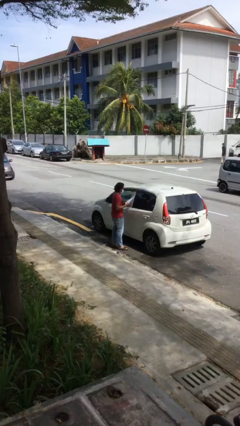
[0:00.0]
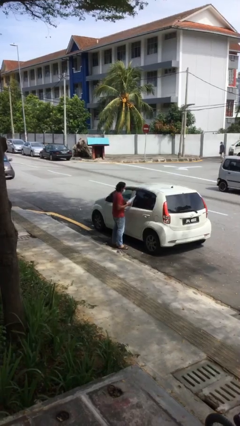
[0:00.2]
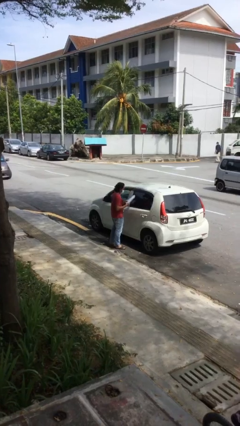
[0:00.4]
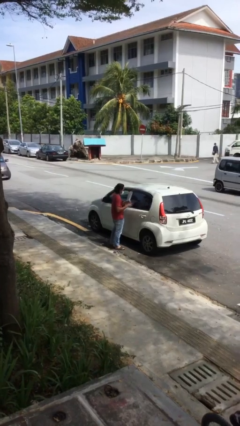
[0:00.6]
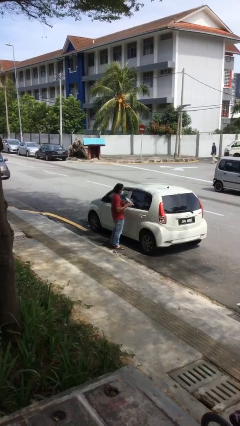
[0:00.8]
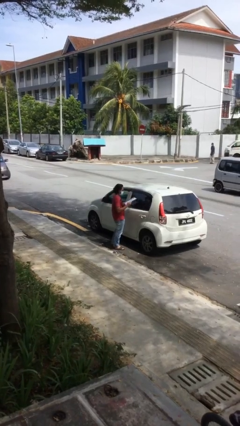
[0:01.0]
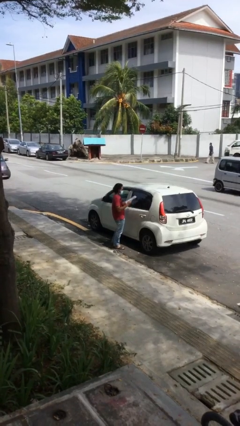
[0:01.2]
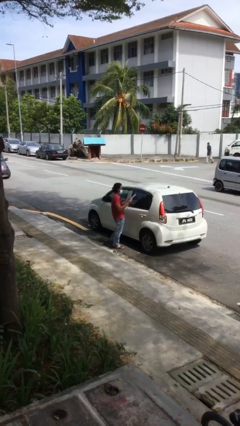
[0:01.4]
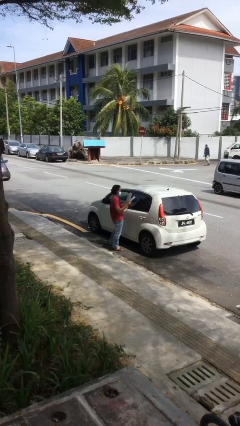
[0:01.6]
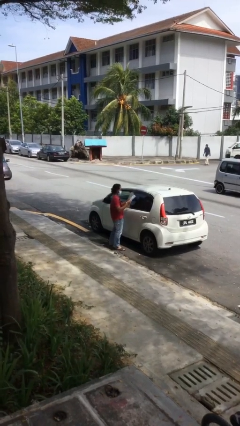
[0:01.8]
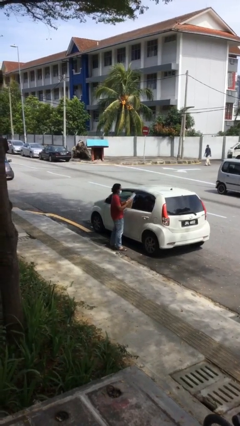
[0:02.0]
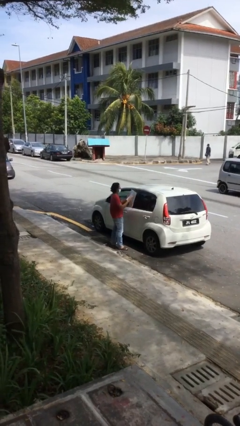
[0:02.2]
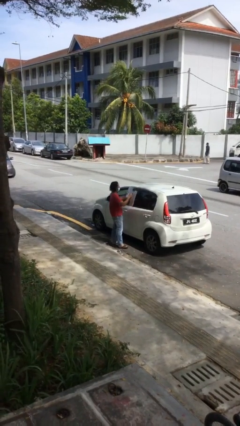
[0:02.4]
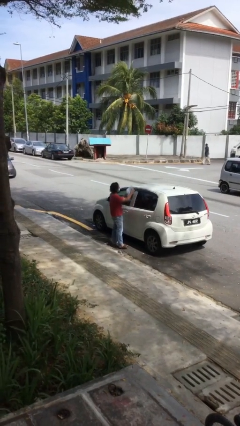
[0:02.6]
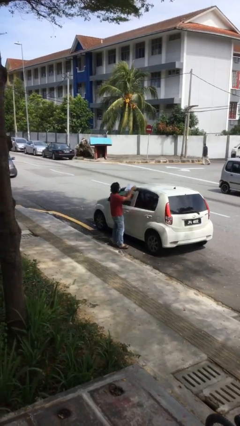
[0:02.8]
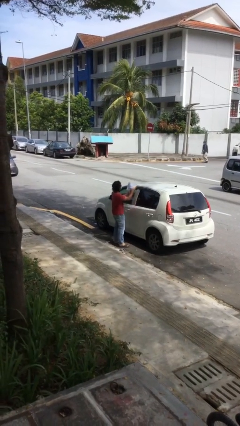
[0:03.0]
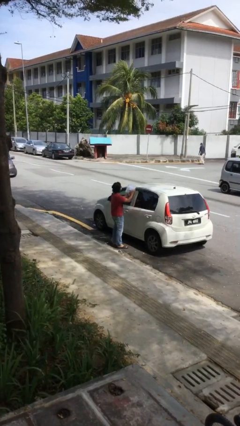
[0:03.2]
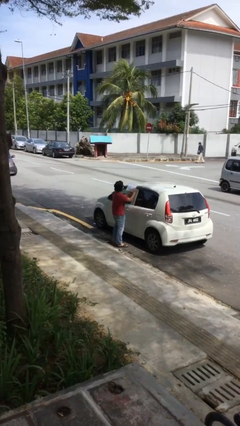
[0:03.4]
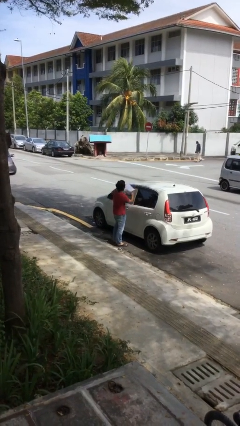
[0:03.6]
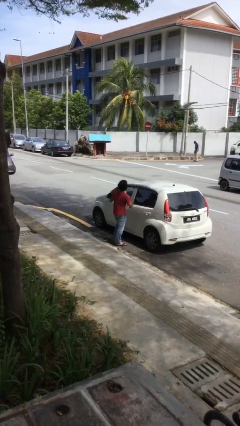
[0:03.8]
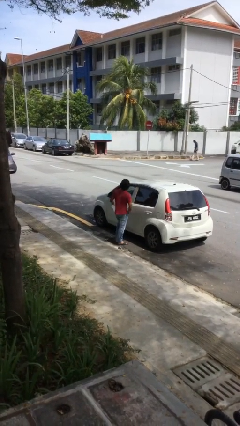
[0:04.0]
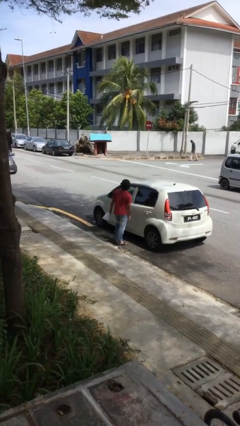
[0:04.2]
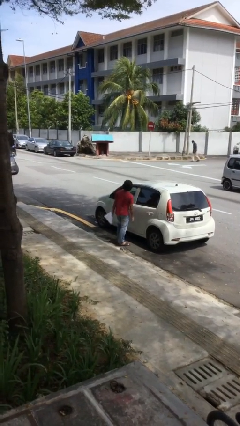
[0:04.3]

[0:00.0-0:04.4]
person reads document

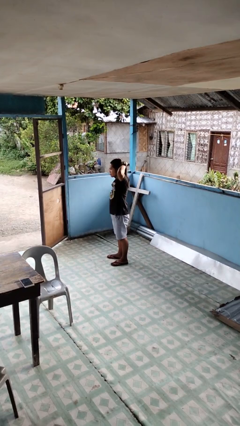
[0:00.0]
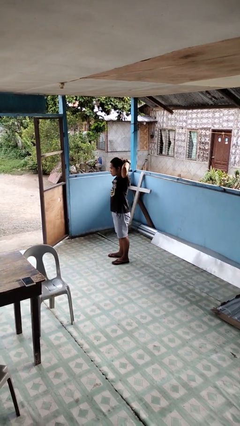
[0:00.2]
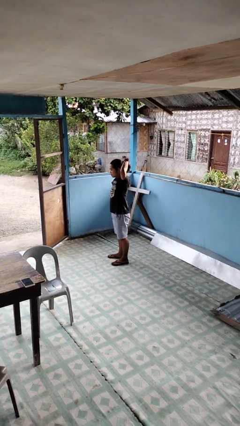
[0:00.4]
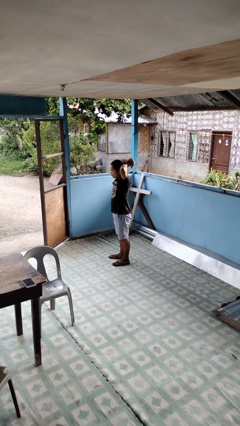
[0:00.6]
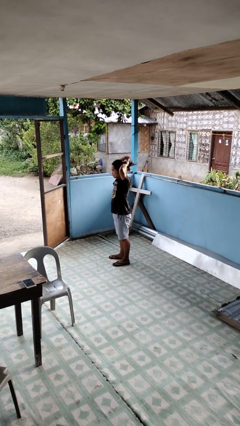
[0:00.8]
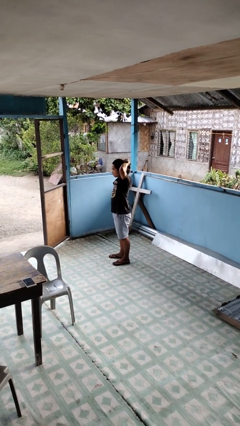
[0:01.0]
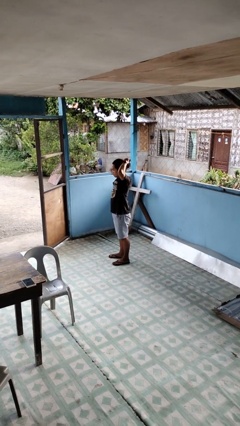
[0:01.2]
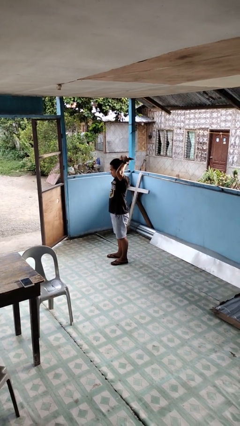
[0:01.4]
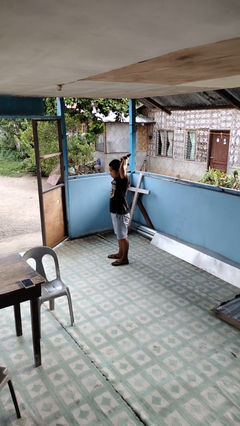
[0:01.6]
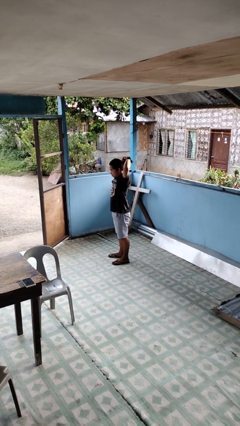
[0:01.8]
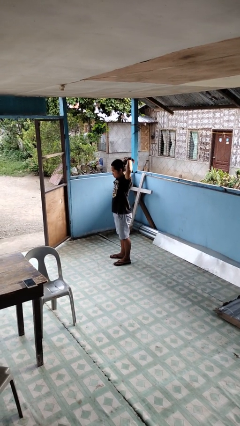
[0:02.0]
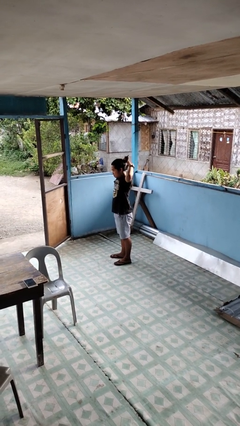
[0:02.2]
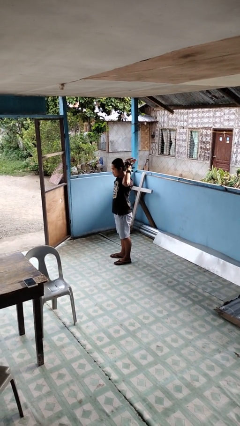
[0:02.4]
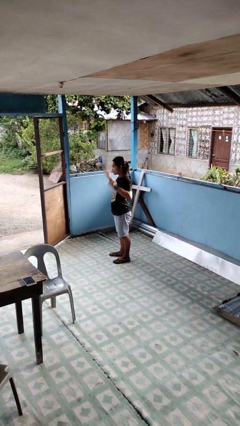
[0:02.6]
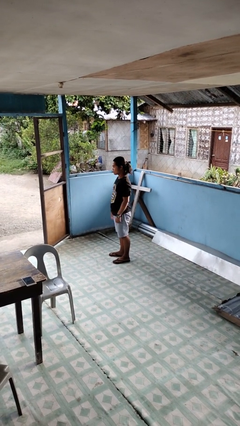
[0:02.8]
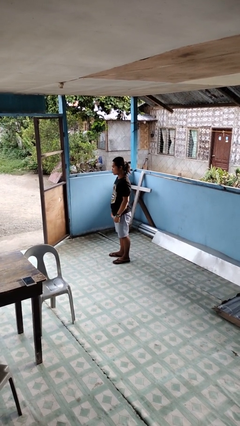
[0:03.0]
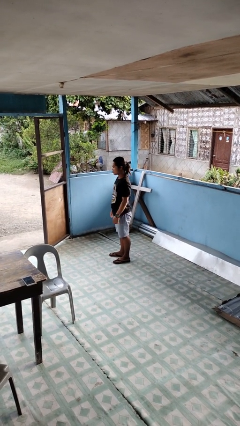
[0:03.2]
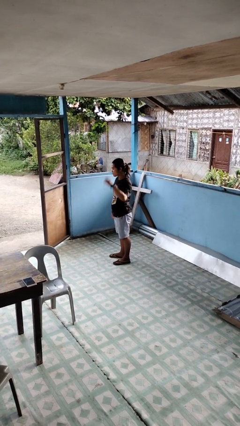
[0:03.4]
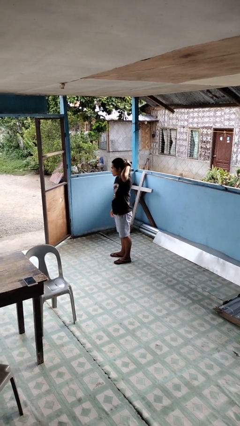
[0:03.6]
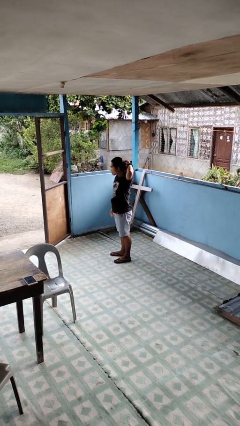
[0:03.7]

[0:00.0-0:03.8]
person puts hair in ponytail

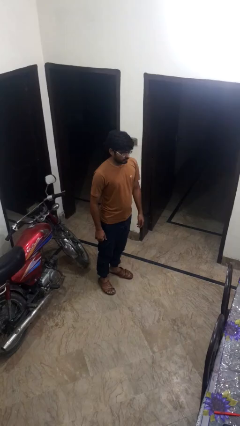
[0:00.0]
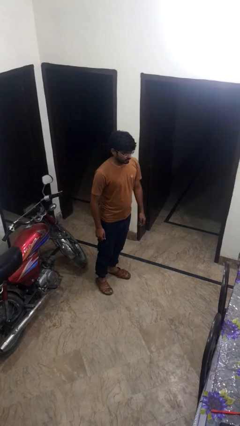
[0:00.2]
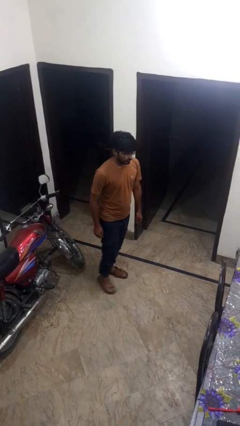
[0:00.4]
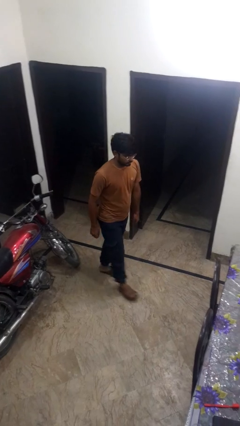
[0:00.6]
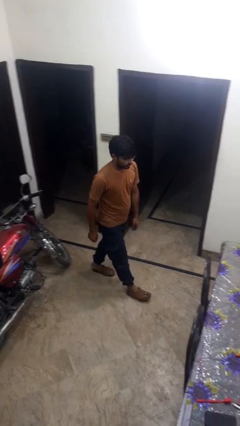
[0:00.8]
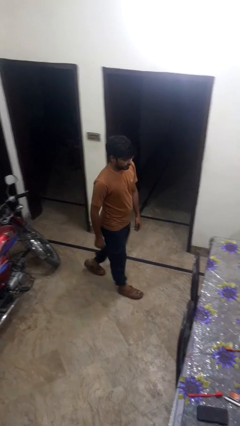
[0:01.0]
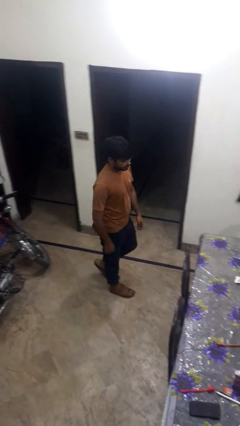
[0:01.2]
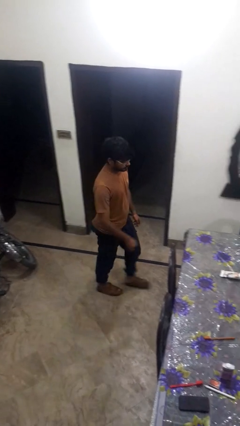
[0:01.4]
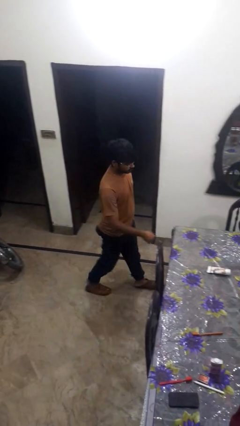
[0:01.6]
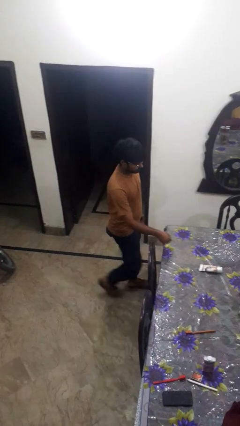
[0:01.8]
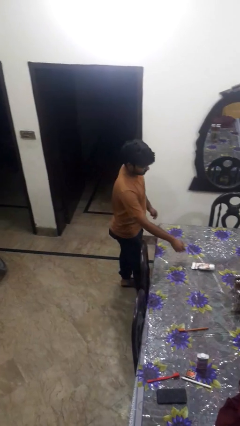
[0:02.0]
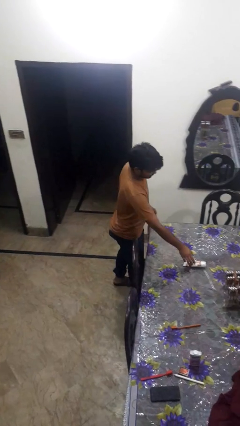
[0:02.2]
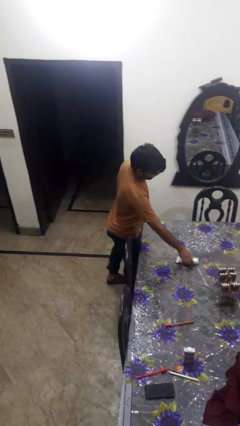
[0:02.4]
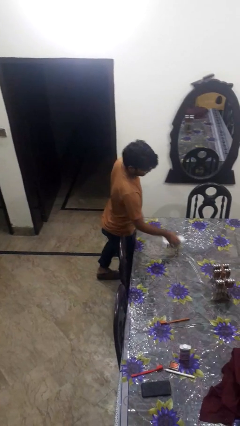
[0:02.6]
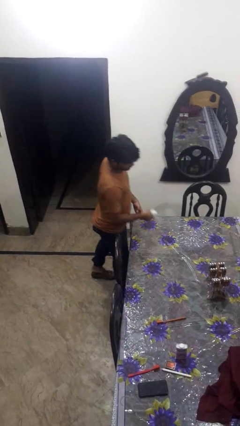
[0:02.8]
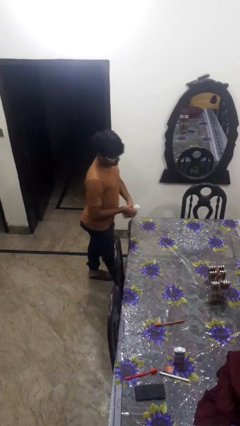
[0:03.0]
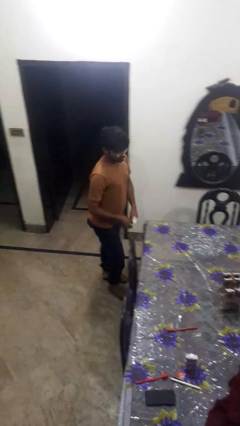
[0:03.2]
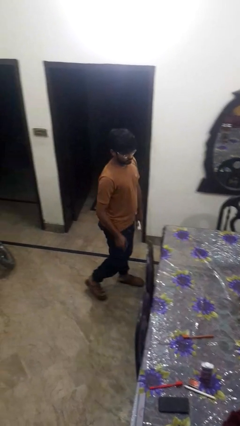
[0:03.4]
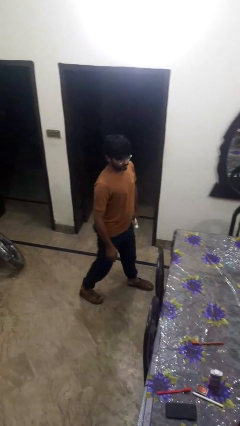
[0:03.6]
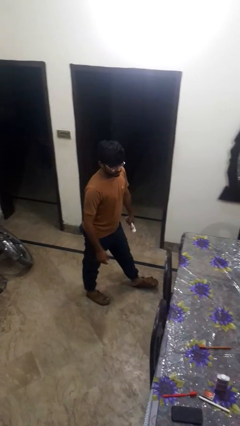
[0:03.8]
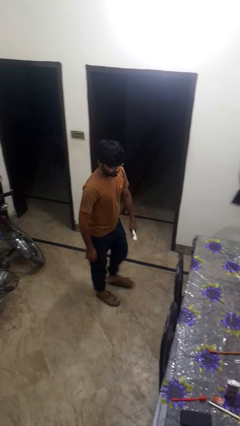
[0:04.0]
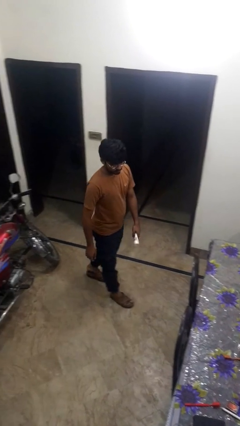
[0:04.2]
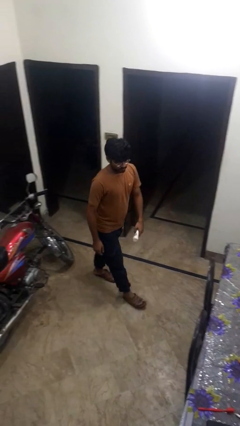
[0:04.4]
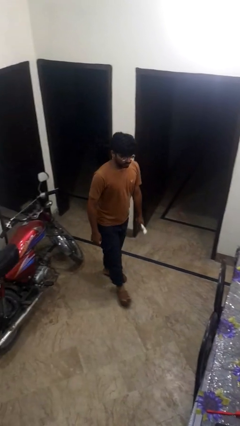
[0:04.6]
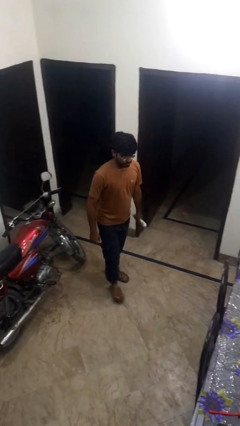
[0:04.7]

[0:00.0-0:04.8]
person picks up object from table

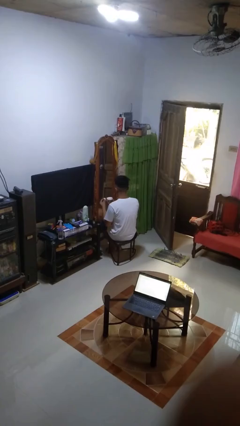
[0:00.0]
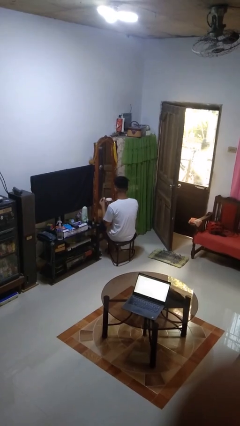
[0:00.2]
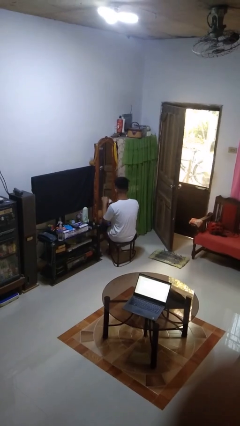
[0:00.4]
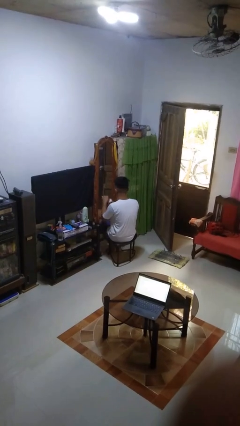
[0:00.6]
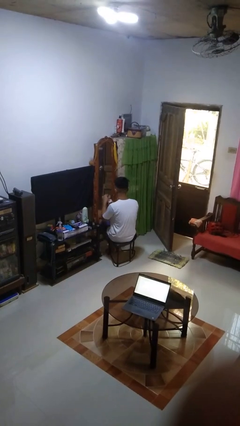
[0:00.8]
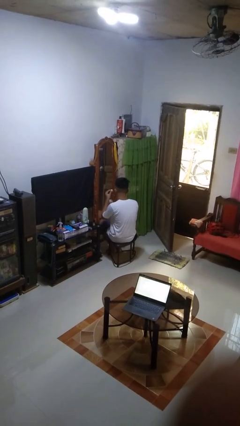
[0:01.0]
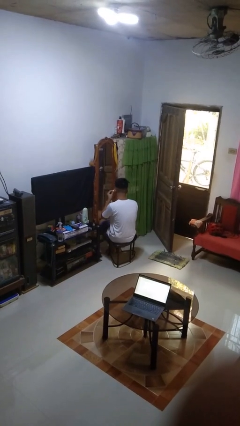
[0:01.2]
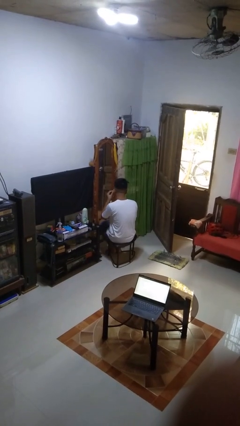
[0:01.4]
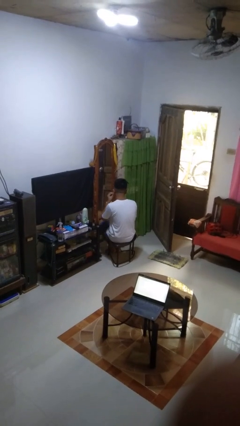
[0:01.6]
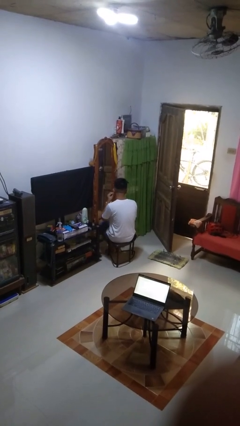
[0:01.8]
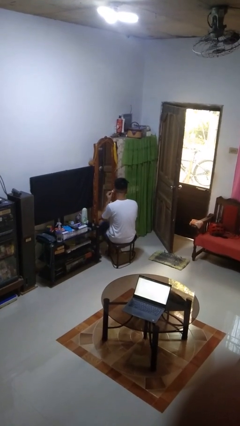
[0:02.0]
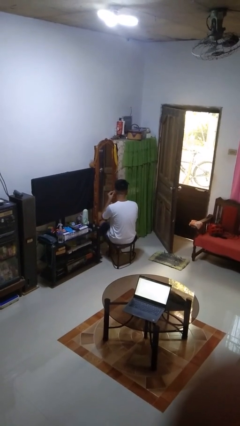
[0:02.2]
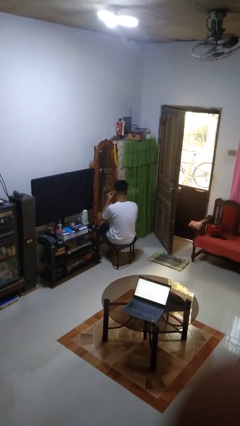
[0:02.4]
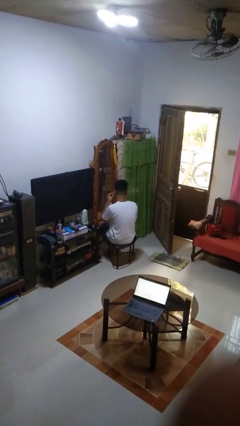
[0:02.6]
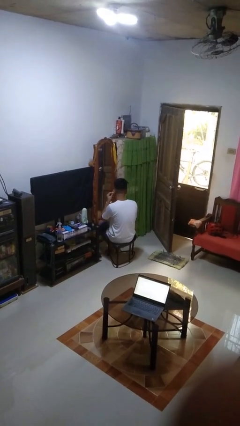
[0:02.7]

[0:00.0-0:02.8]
person applies foundation makeup

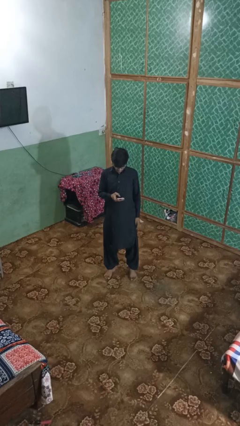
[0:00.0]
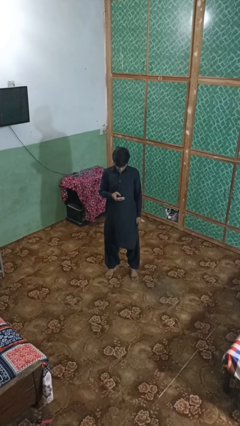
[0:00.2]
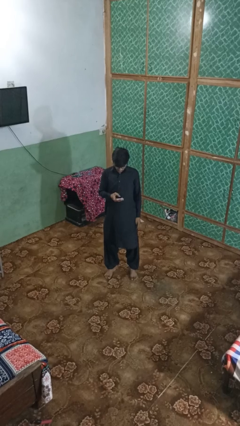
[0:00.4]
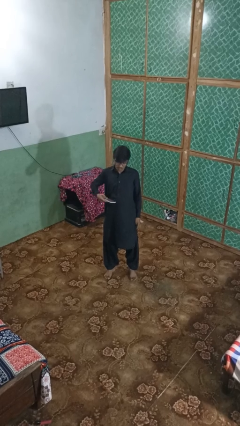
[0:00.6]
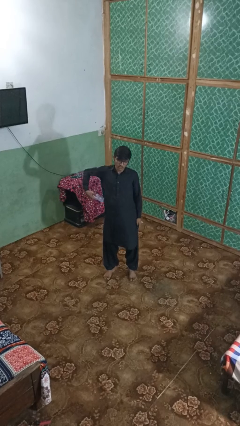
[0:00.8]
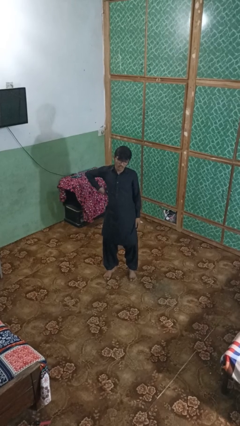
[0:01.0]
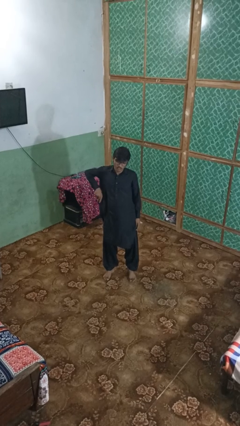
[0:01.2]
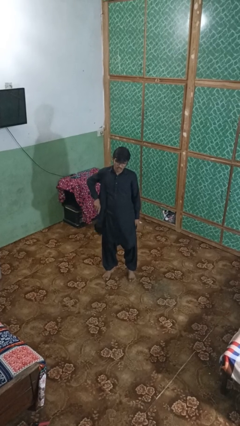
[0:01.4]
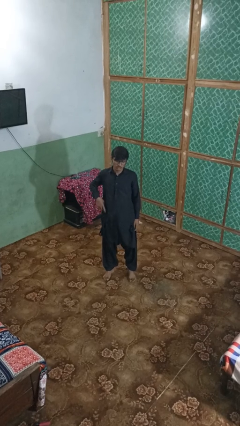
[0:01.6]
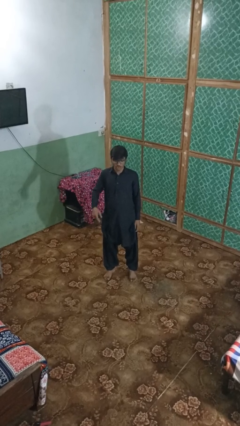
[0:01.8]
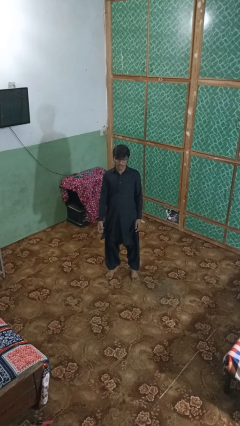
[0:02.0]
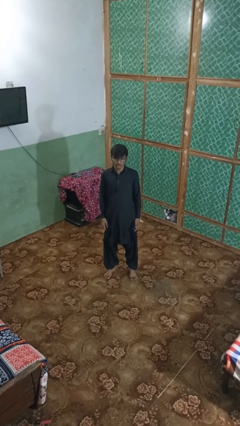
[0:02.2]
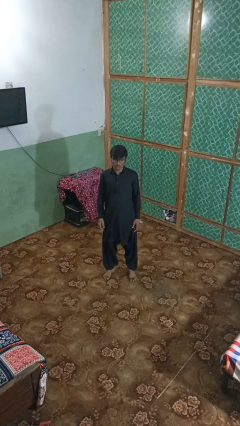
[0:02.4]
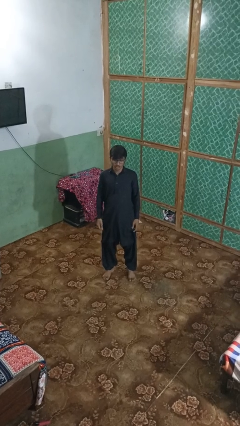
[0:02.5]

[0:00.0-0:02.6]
person puts phone into pocket
